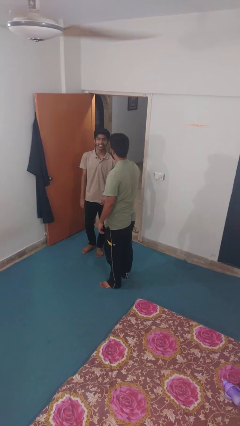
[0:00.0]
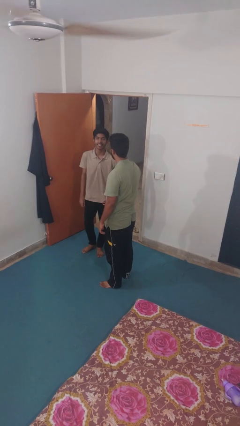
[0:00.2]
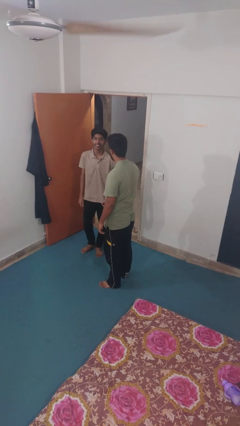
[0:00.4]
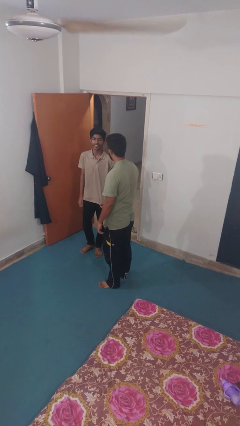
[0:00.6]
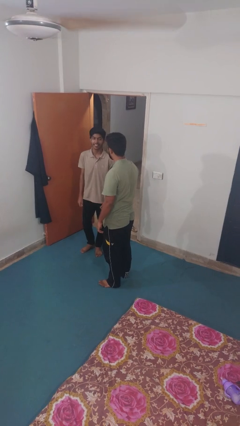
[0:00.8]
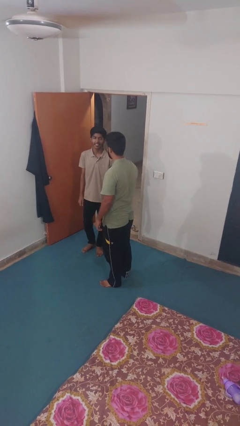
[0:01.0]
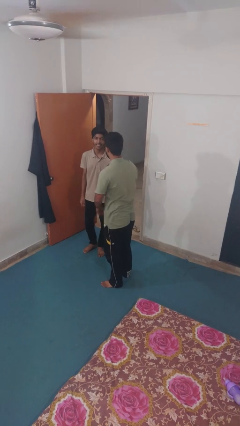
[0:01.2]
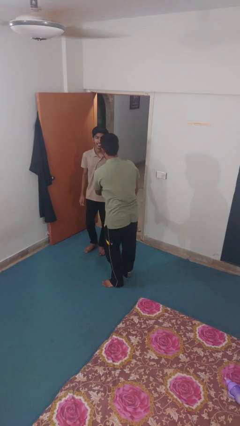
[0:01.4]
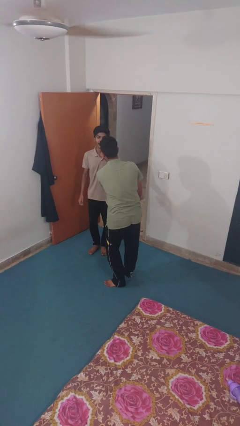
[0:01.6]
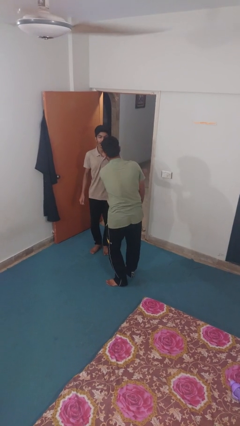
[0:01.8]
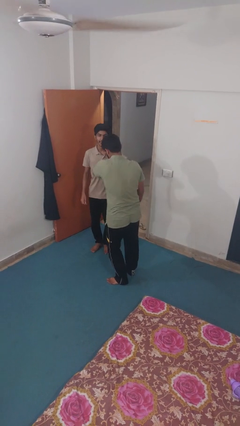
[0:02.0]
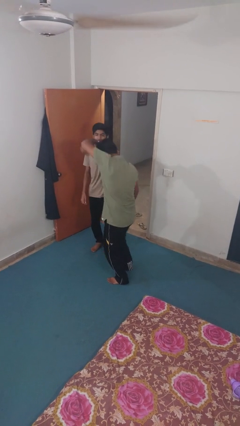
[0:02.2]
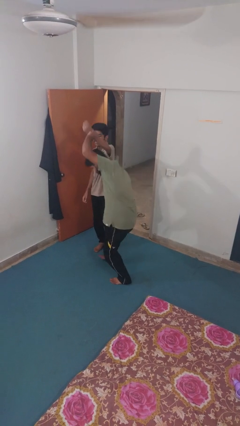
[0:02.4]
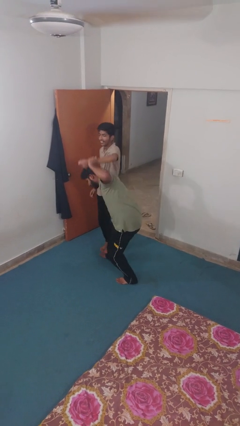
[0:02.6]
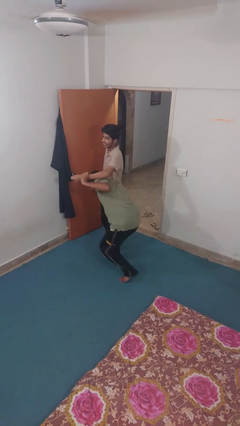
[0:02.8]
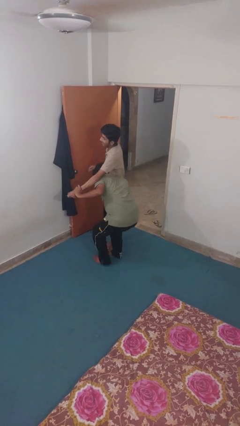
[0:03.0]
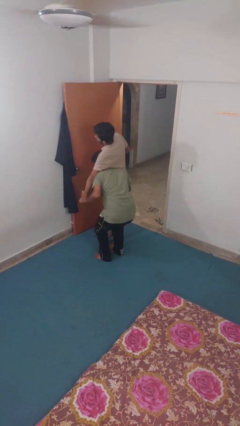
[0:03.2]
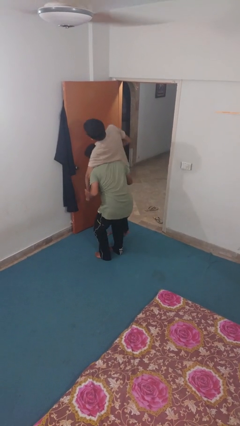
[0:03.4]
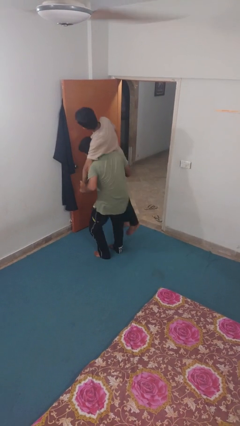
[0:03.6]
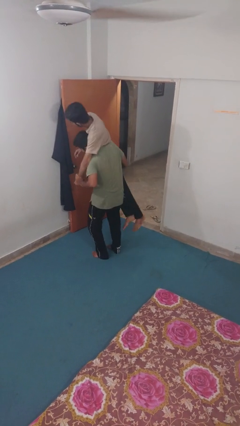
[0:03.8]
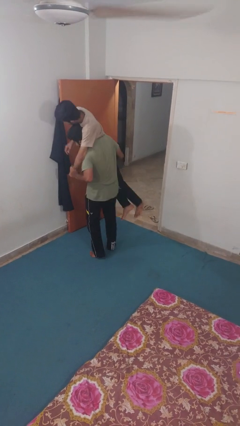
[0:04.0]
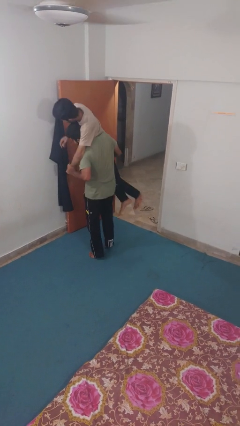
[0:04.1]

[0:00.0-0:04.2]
person carries person over shoulder

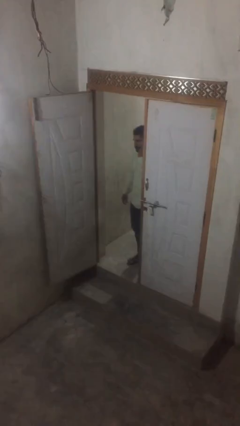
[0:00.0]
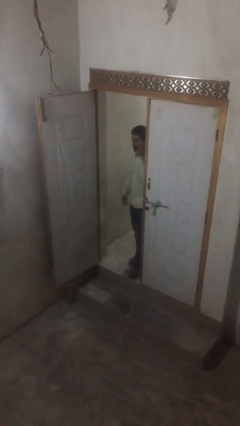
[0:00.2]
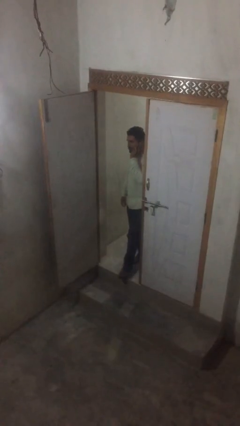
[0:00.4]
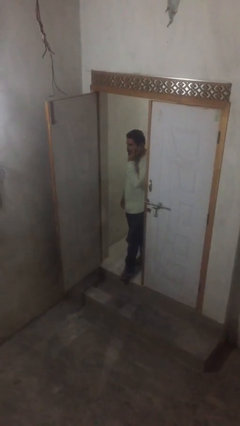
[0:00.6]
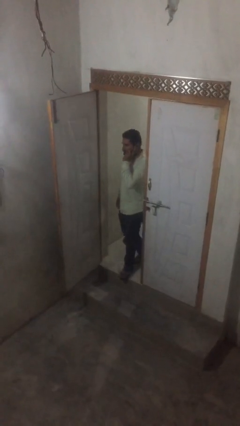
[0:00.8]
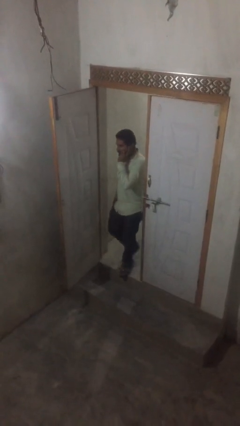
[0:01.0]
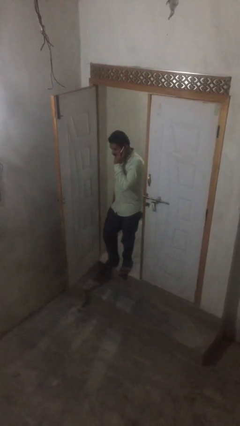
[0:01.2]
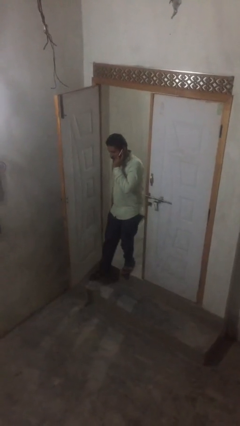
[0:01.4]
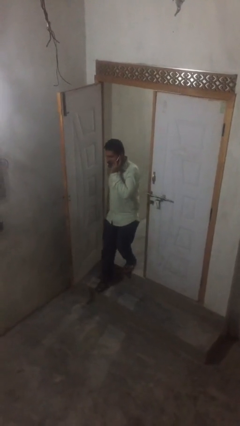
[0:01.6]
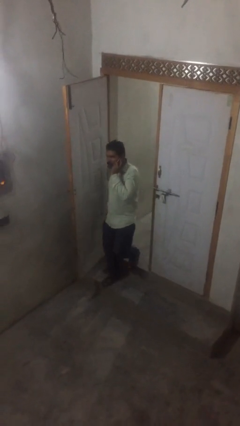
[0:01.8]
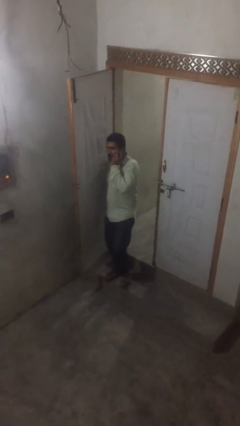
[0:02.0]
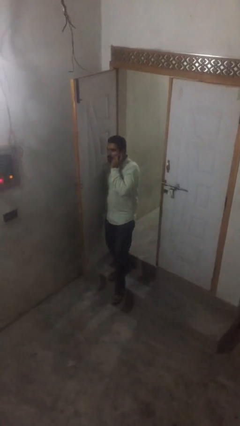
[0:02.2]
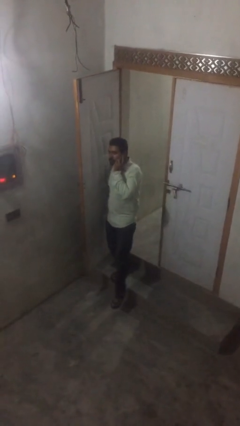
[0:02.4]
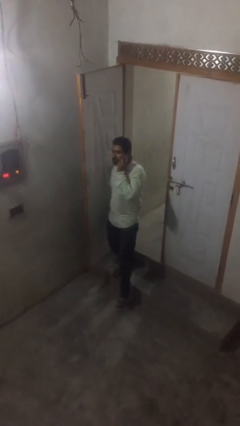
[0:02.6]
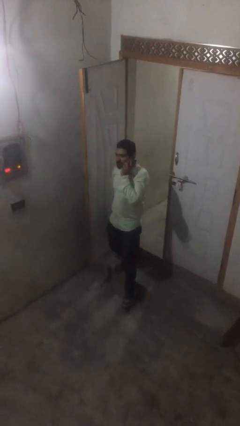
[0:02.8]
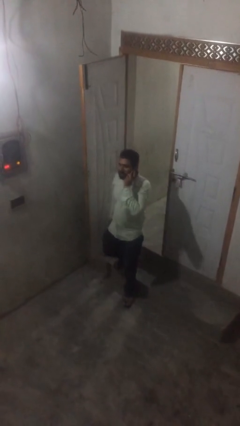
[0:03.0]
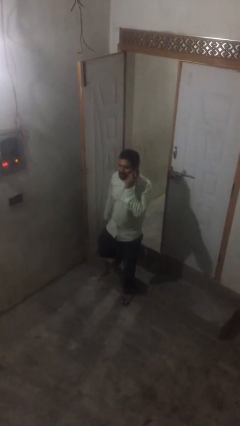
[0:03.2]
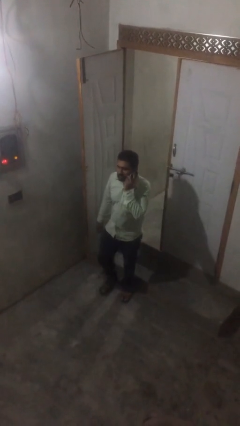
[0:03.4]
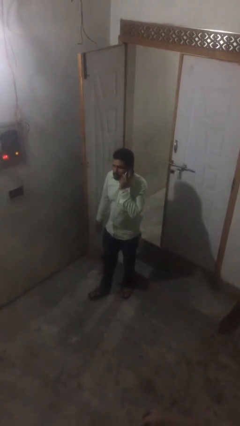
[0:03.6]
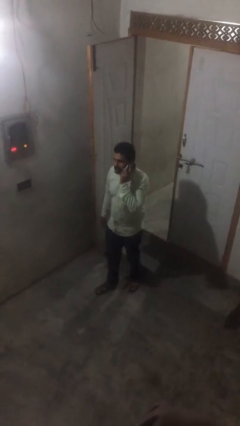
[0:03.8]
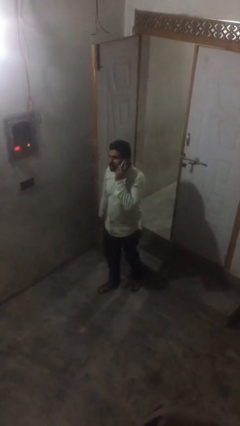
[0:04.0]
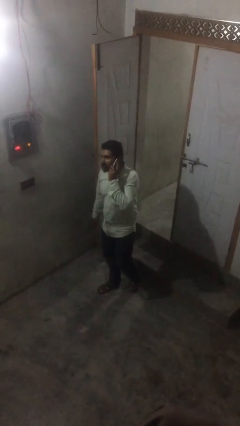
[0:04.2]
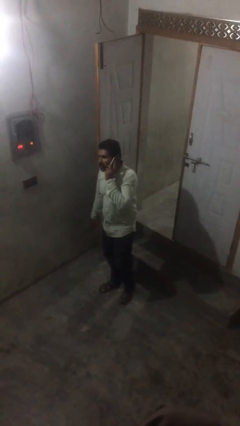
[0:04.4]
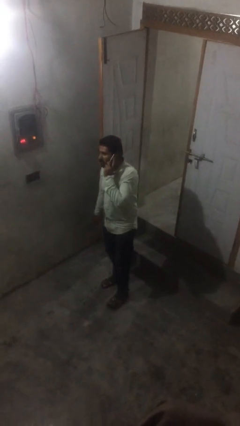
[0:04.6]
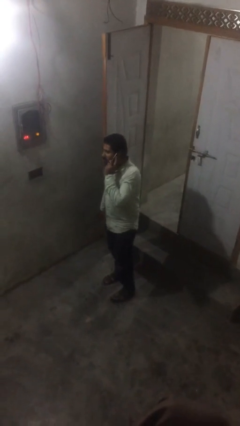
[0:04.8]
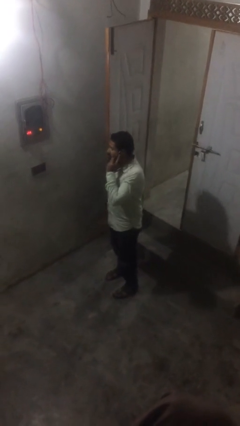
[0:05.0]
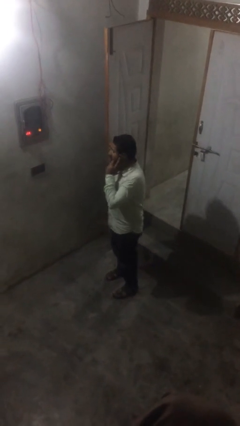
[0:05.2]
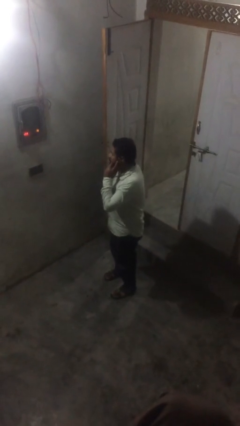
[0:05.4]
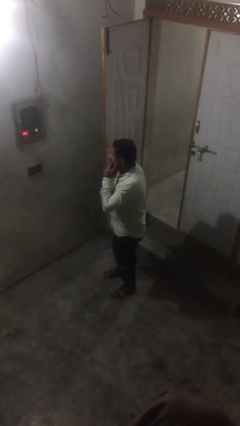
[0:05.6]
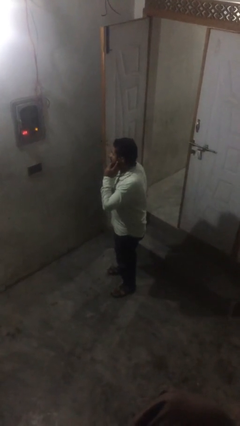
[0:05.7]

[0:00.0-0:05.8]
person enters scene through structure

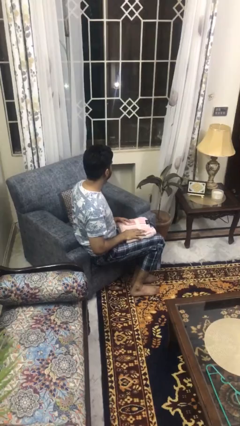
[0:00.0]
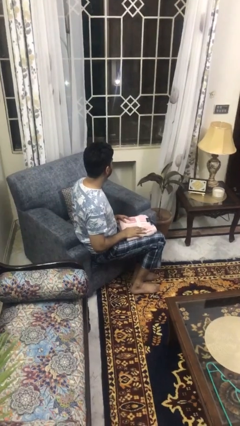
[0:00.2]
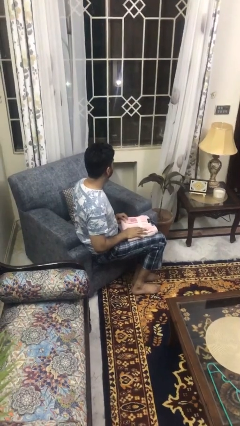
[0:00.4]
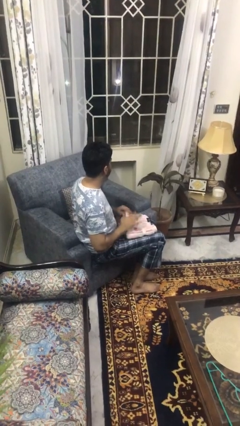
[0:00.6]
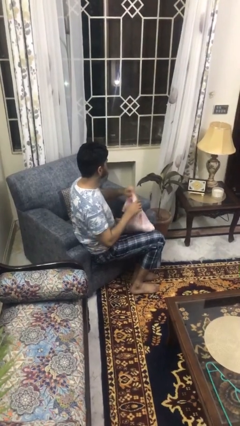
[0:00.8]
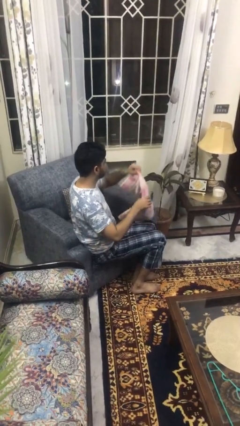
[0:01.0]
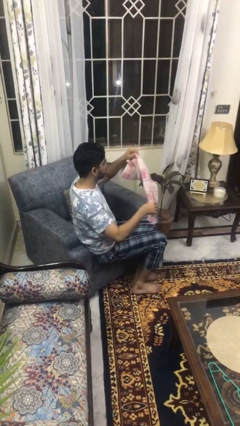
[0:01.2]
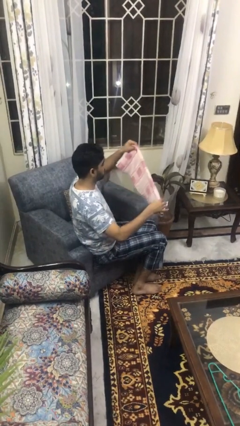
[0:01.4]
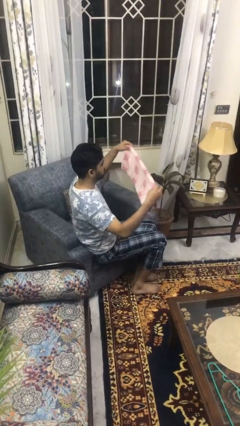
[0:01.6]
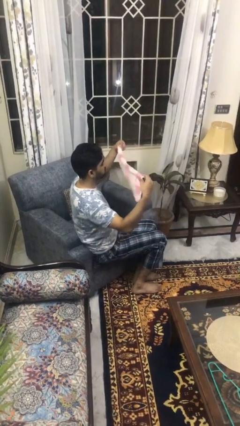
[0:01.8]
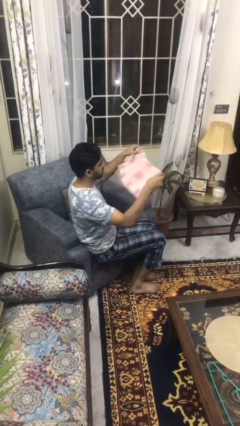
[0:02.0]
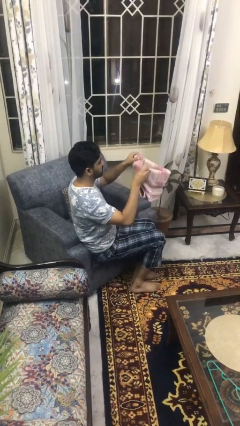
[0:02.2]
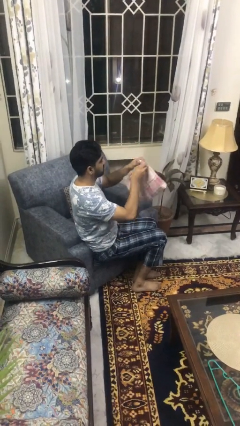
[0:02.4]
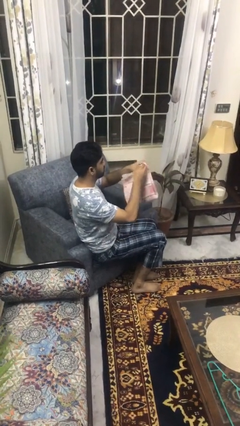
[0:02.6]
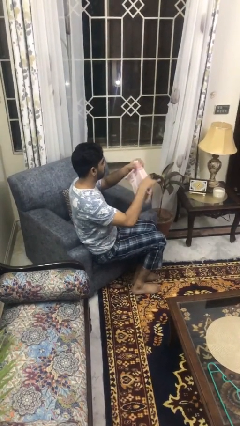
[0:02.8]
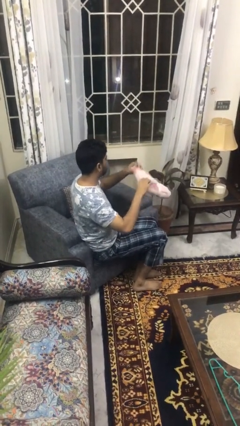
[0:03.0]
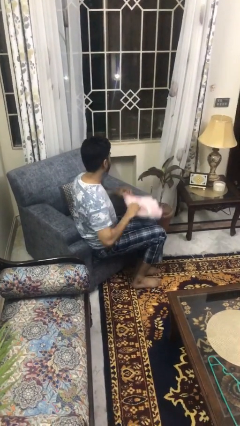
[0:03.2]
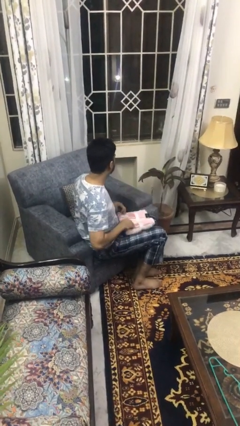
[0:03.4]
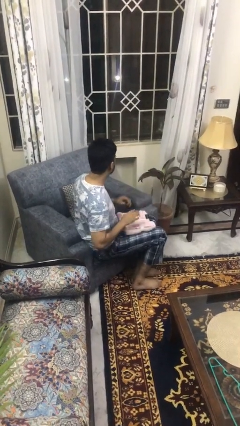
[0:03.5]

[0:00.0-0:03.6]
person folds towel

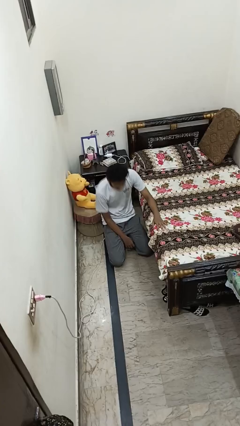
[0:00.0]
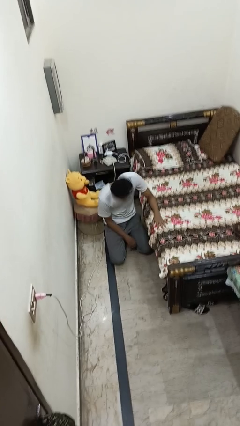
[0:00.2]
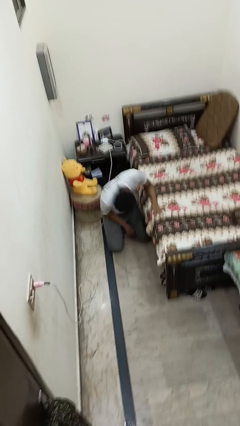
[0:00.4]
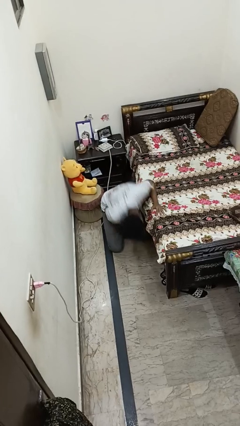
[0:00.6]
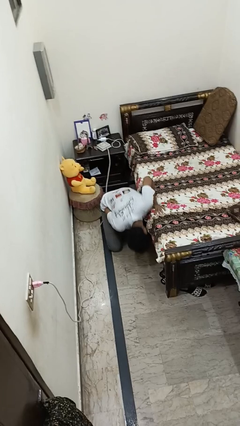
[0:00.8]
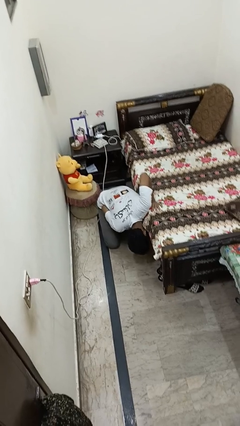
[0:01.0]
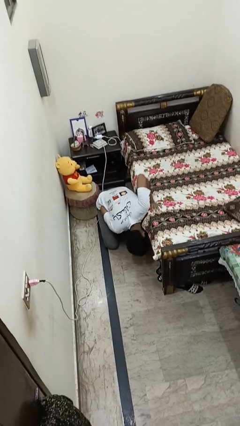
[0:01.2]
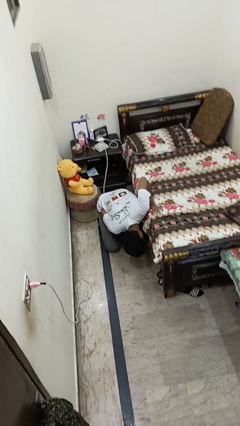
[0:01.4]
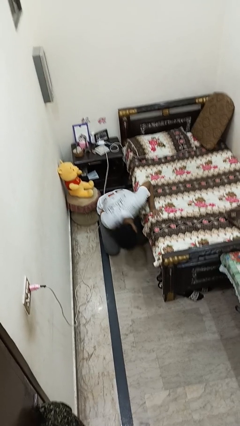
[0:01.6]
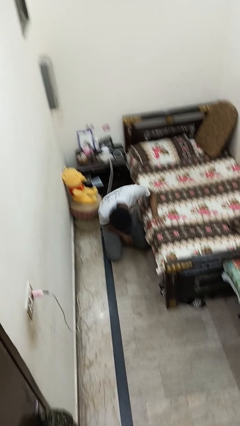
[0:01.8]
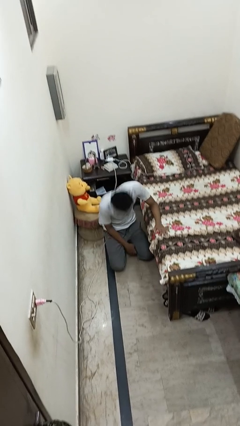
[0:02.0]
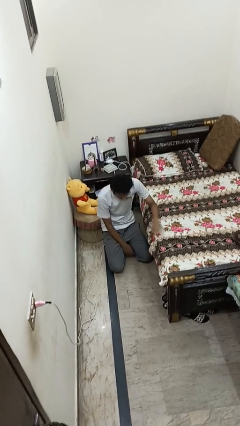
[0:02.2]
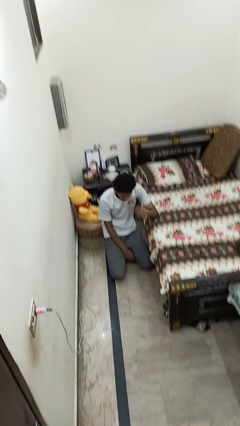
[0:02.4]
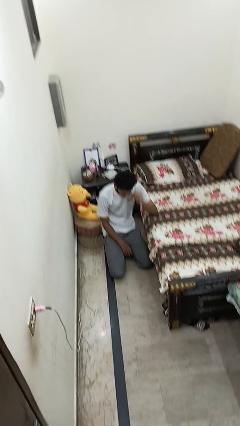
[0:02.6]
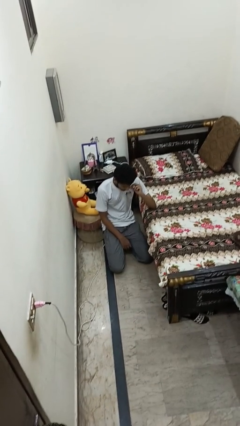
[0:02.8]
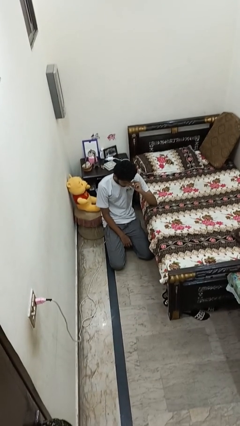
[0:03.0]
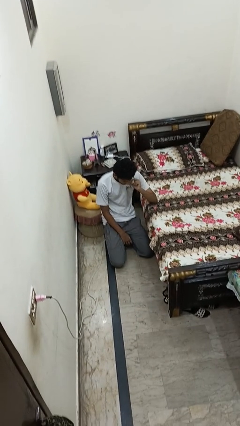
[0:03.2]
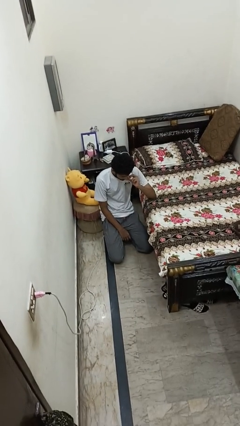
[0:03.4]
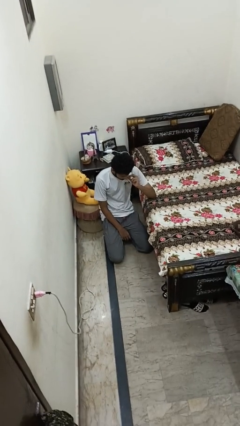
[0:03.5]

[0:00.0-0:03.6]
person searches under bed

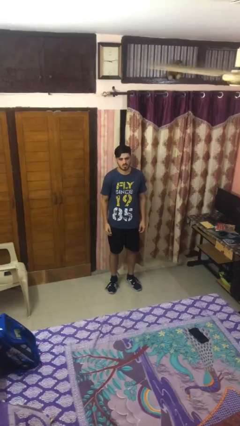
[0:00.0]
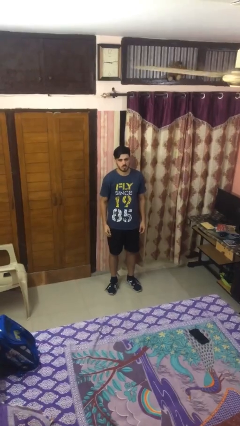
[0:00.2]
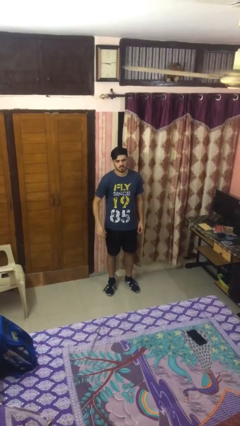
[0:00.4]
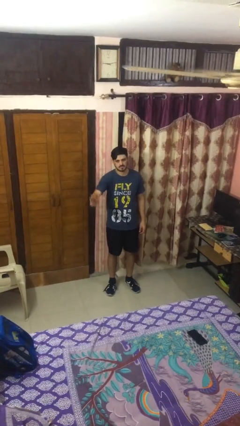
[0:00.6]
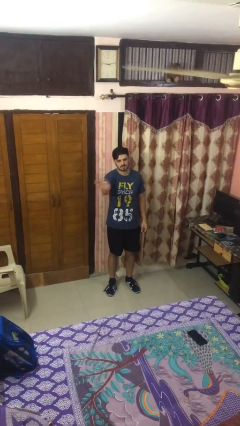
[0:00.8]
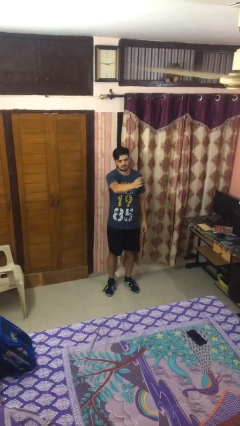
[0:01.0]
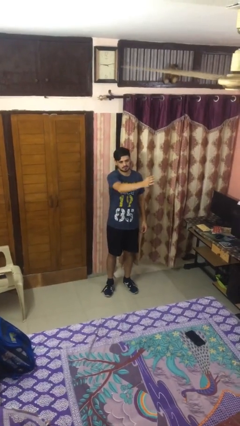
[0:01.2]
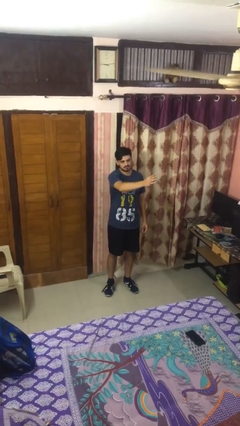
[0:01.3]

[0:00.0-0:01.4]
person gestures swipe left
